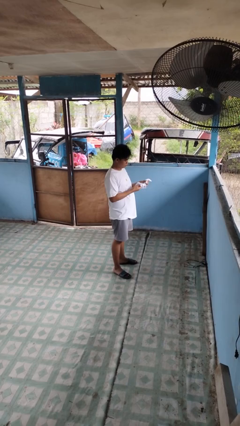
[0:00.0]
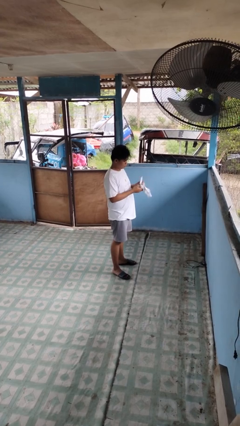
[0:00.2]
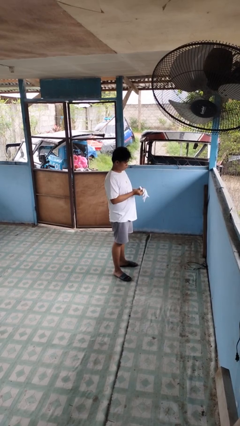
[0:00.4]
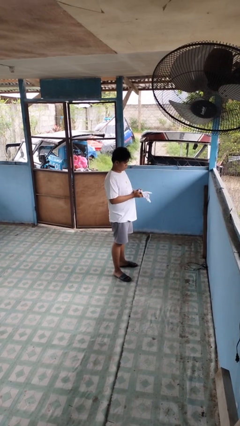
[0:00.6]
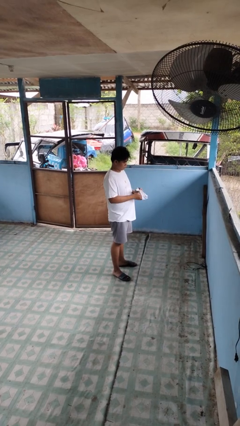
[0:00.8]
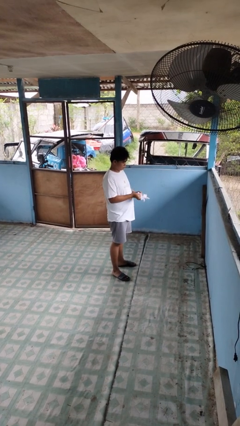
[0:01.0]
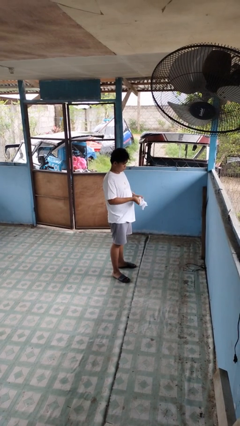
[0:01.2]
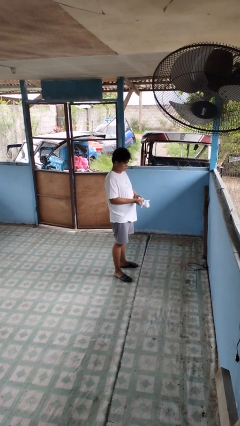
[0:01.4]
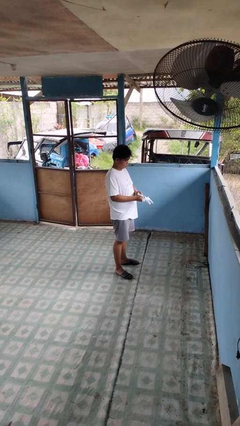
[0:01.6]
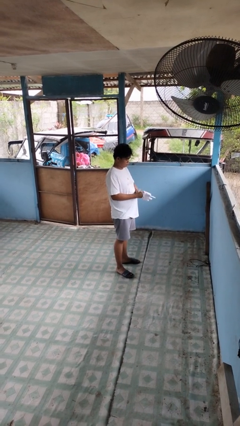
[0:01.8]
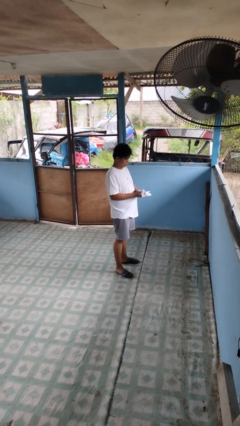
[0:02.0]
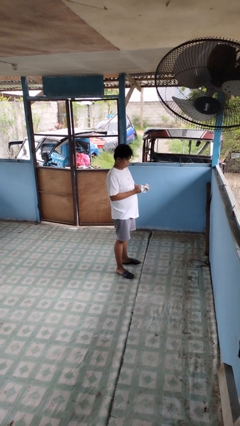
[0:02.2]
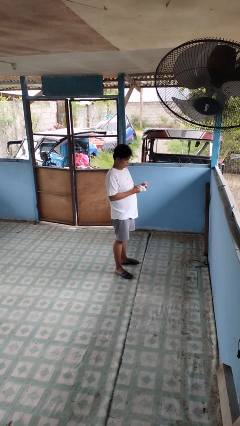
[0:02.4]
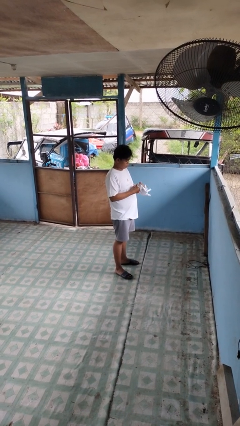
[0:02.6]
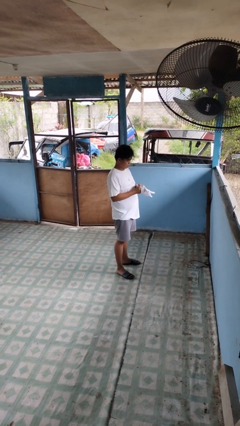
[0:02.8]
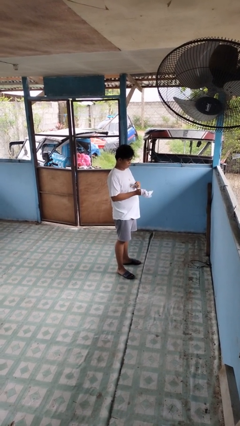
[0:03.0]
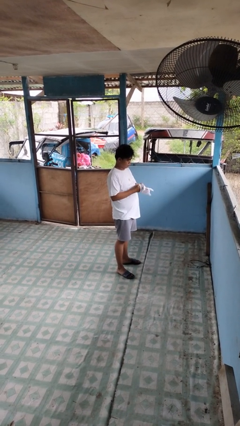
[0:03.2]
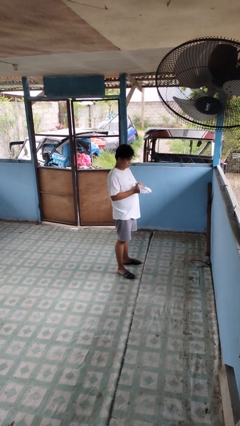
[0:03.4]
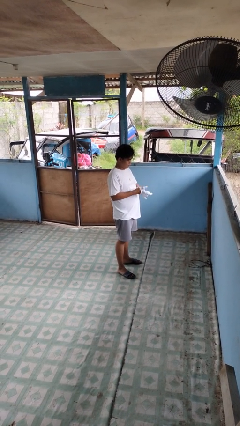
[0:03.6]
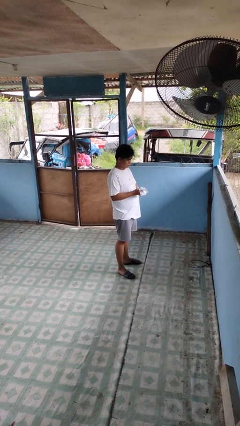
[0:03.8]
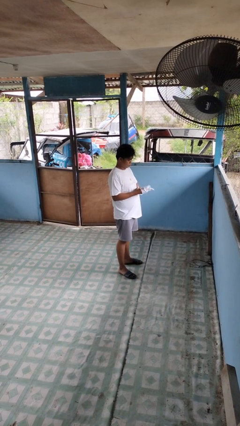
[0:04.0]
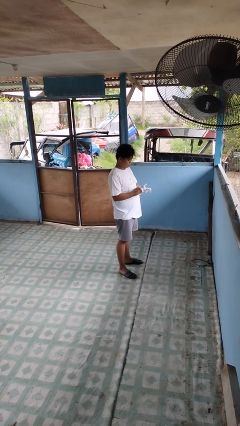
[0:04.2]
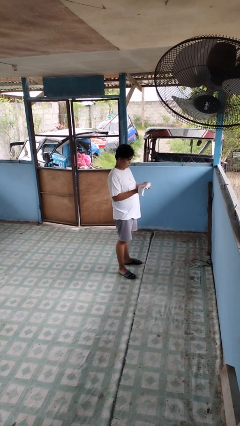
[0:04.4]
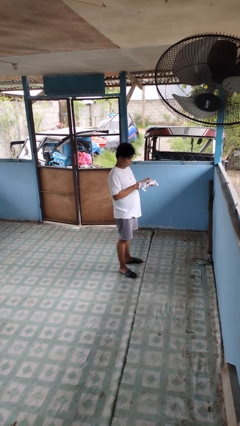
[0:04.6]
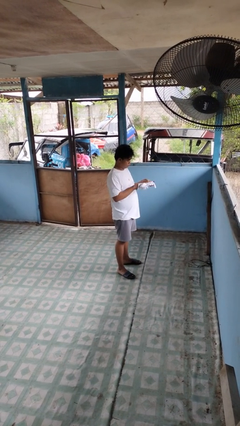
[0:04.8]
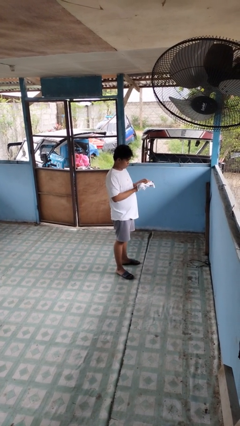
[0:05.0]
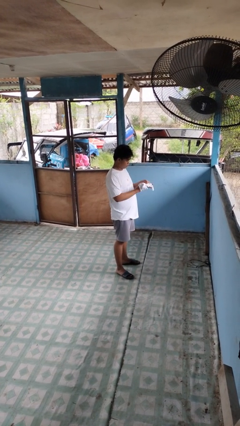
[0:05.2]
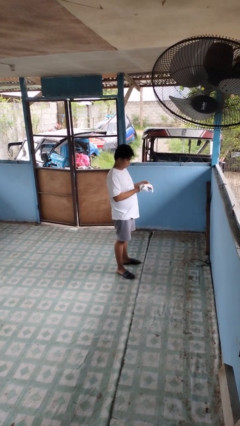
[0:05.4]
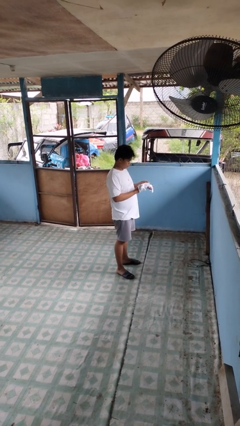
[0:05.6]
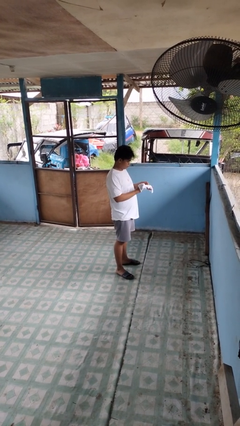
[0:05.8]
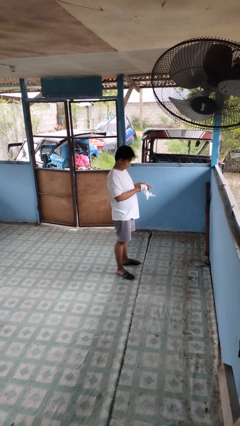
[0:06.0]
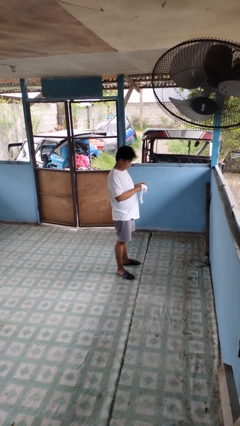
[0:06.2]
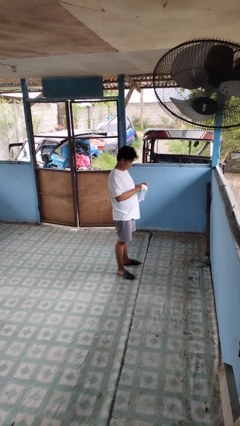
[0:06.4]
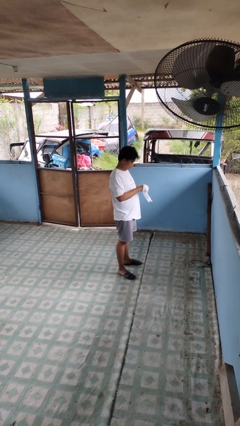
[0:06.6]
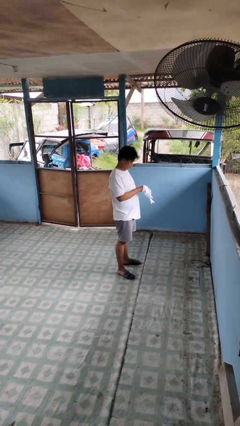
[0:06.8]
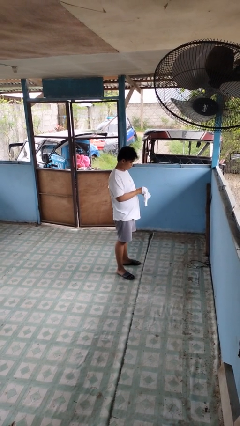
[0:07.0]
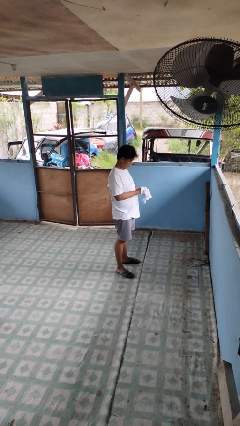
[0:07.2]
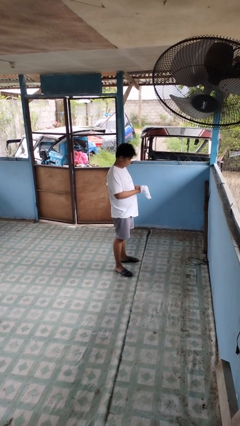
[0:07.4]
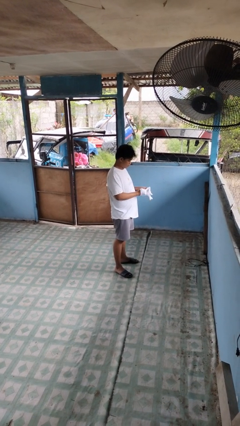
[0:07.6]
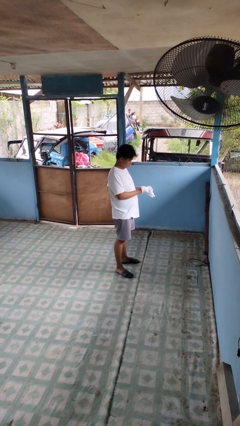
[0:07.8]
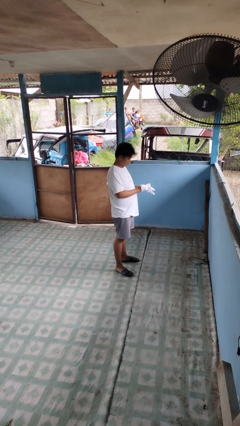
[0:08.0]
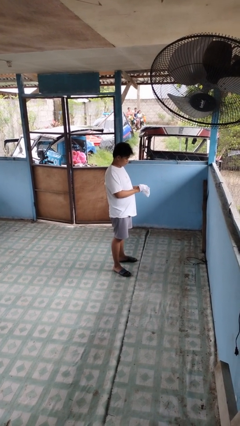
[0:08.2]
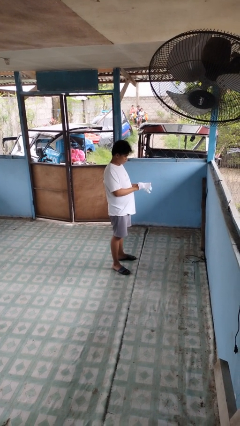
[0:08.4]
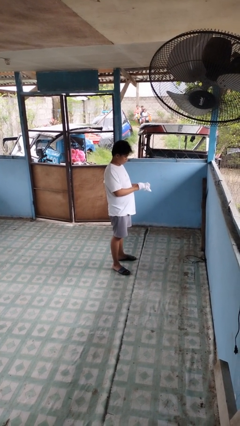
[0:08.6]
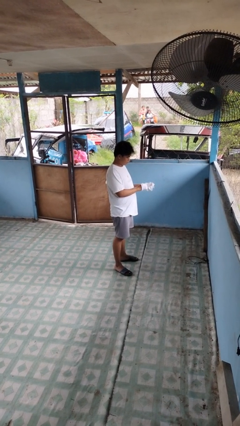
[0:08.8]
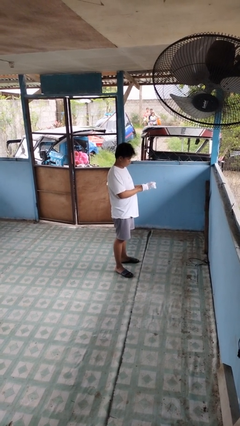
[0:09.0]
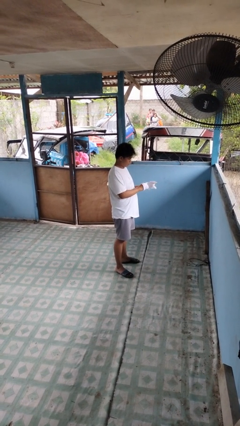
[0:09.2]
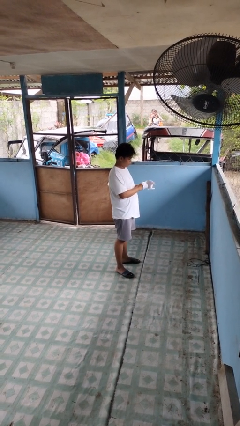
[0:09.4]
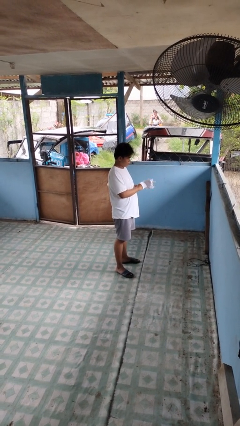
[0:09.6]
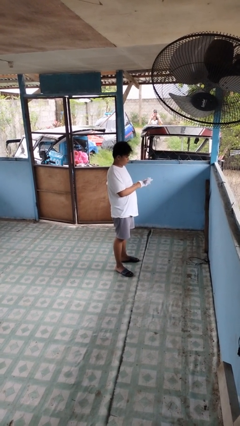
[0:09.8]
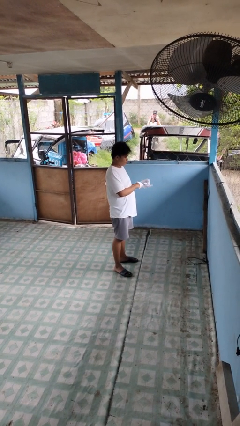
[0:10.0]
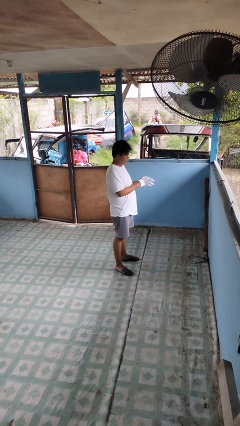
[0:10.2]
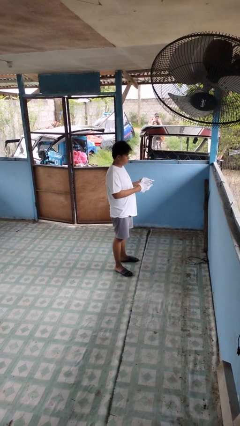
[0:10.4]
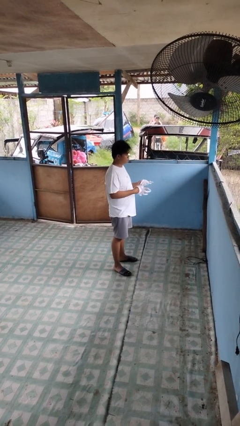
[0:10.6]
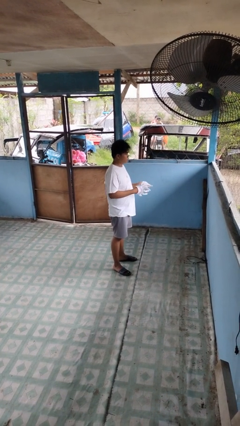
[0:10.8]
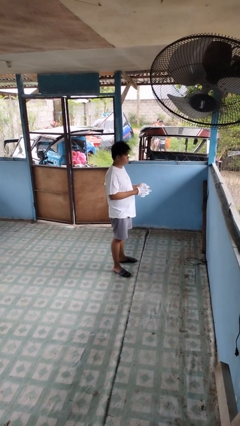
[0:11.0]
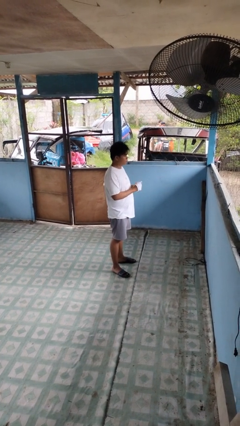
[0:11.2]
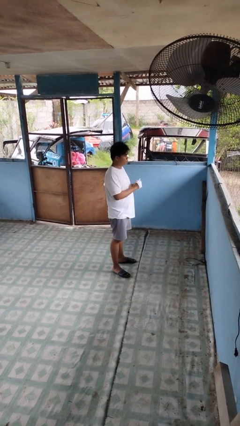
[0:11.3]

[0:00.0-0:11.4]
person puts on gloves

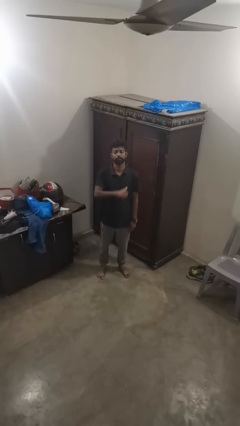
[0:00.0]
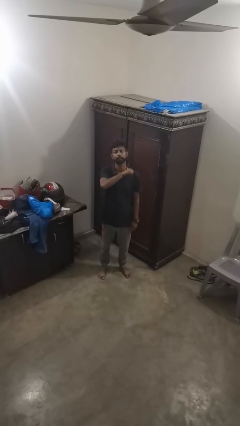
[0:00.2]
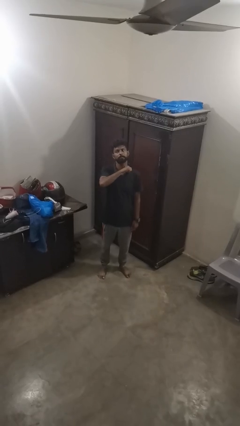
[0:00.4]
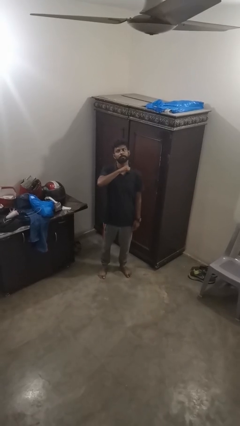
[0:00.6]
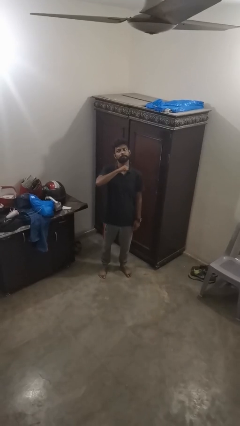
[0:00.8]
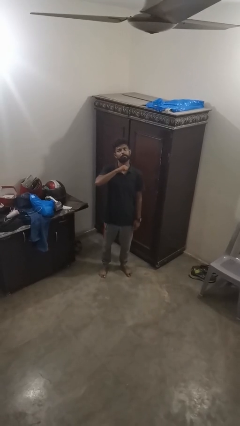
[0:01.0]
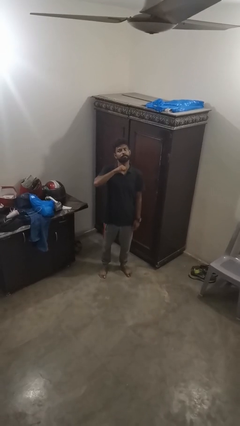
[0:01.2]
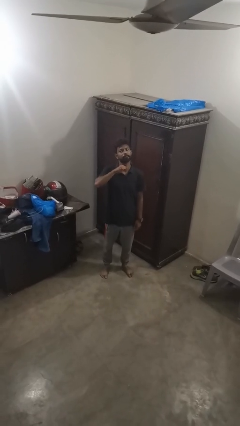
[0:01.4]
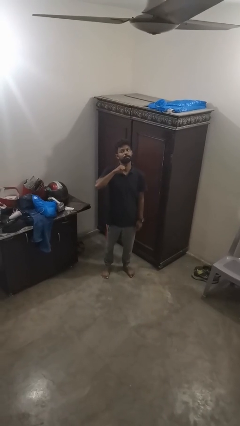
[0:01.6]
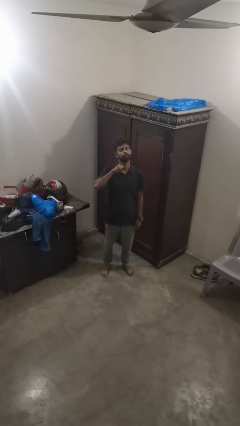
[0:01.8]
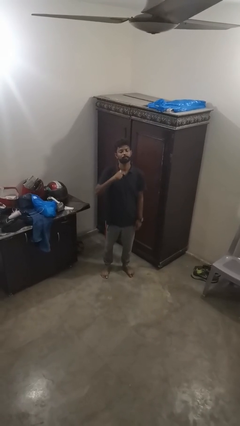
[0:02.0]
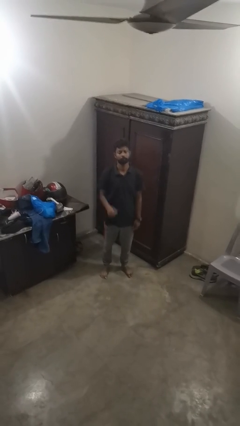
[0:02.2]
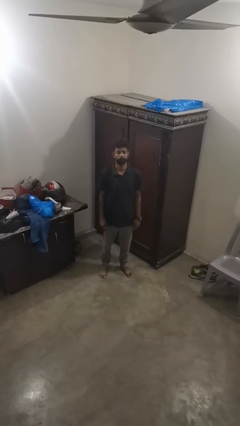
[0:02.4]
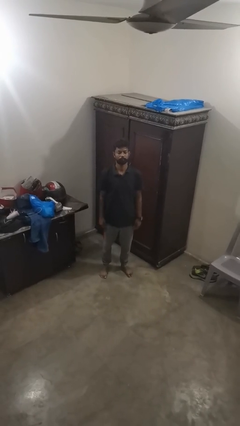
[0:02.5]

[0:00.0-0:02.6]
person gestures cut

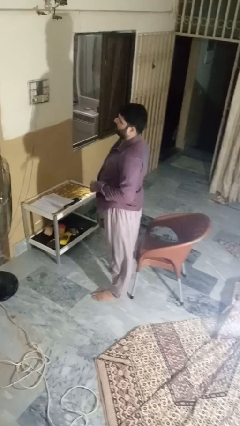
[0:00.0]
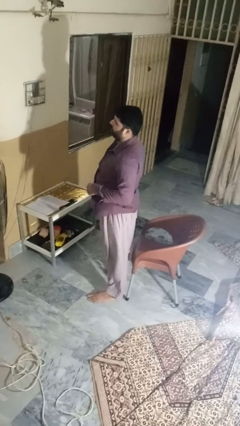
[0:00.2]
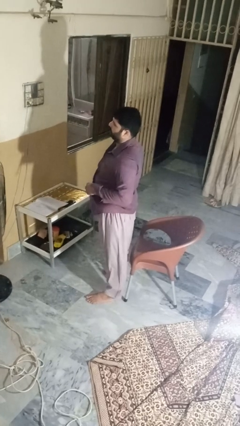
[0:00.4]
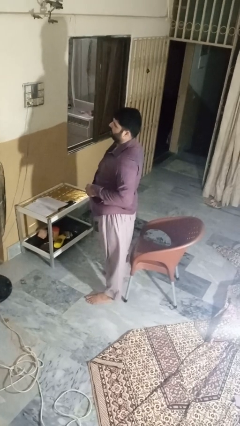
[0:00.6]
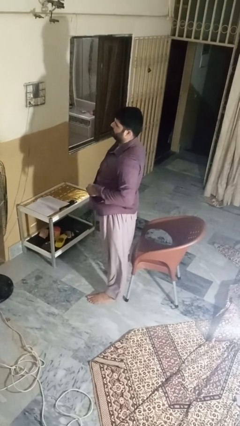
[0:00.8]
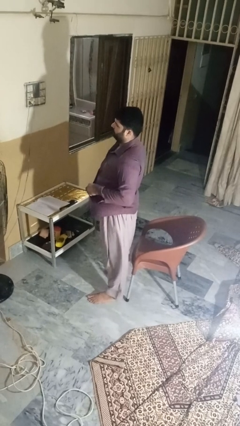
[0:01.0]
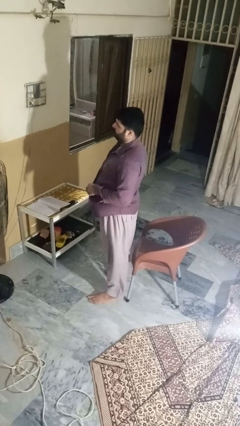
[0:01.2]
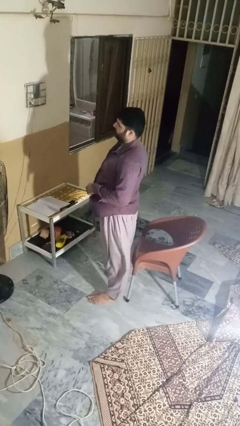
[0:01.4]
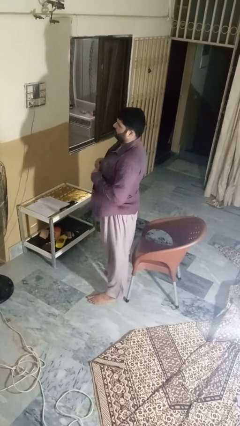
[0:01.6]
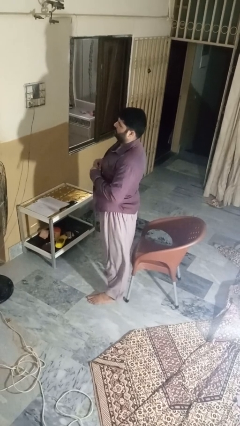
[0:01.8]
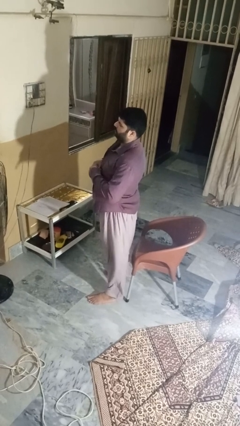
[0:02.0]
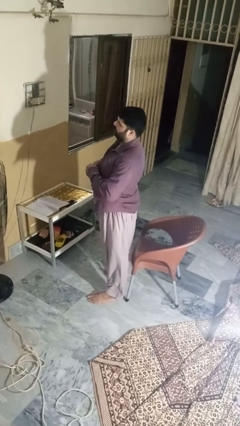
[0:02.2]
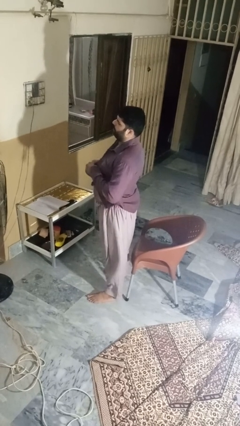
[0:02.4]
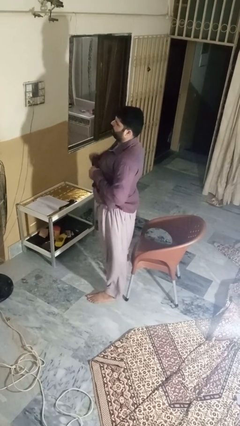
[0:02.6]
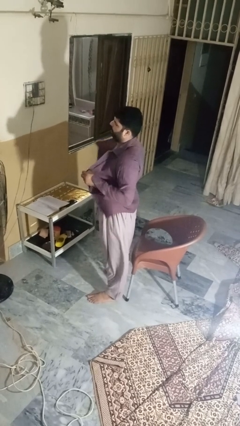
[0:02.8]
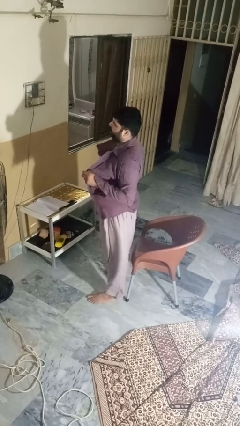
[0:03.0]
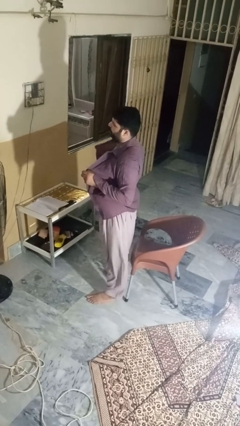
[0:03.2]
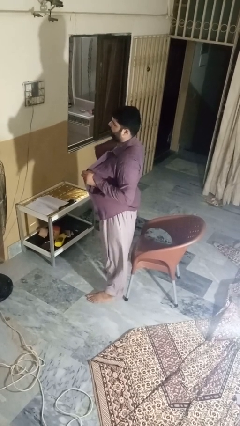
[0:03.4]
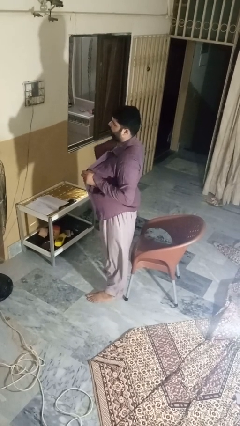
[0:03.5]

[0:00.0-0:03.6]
person unbuttons shirt
